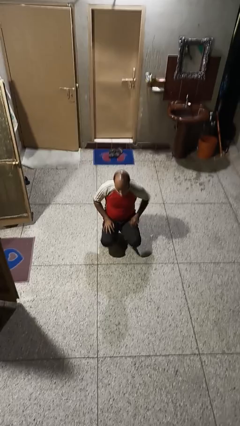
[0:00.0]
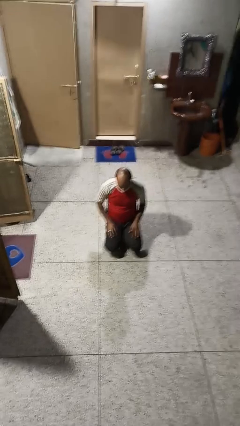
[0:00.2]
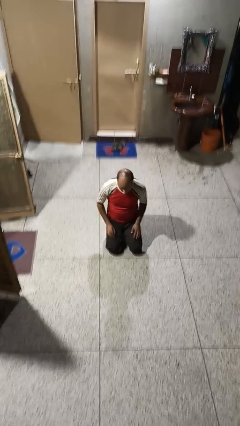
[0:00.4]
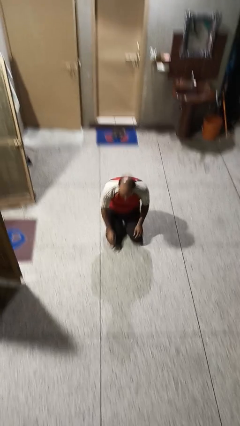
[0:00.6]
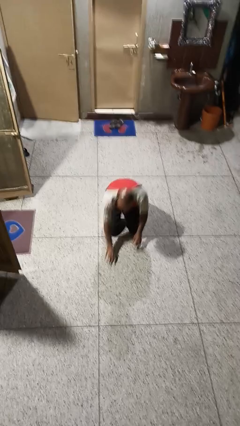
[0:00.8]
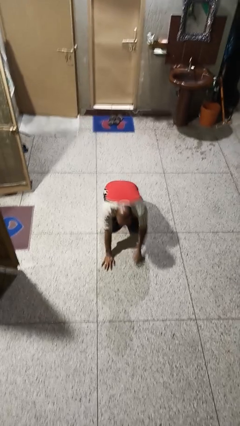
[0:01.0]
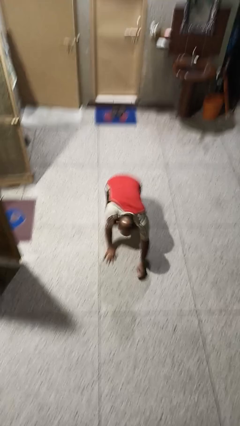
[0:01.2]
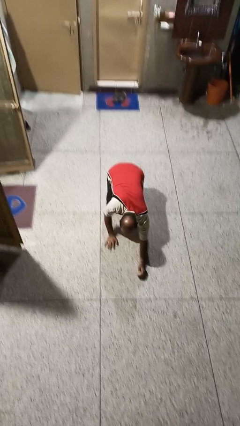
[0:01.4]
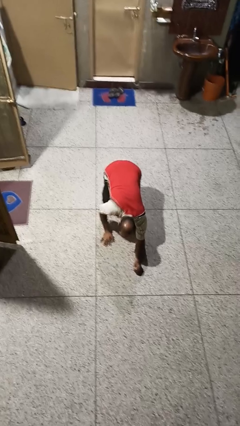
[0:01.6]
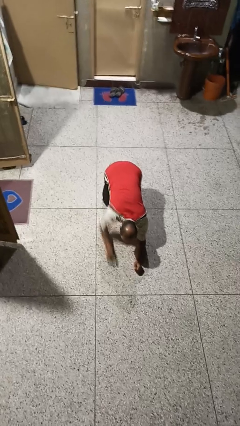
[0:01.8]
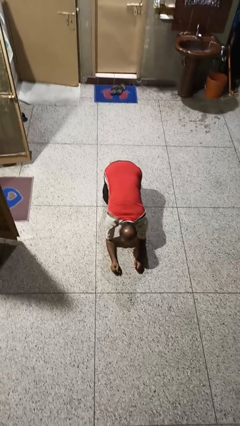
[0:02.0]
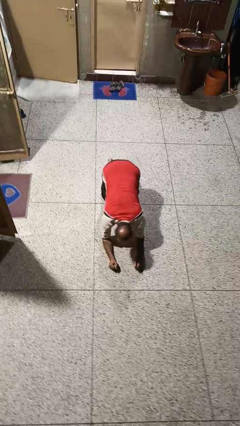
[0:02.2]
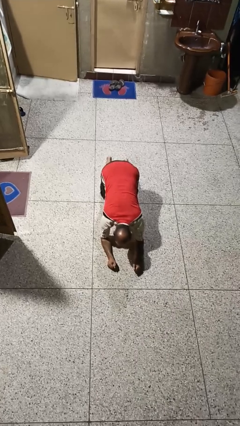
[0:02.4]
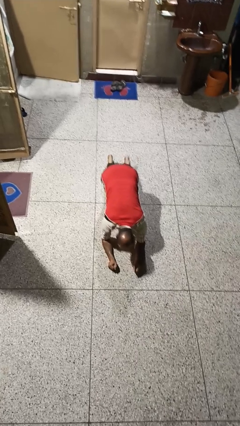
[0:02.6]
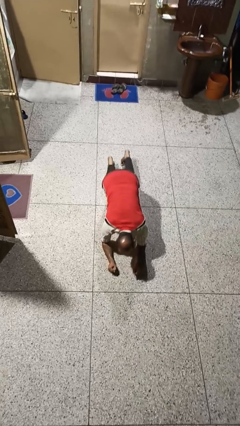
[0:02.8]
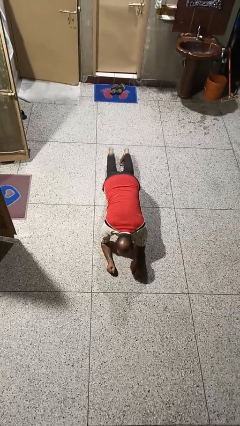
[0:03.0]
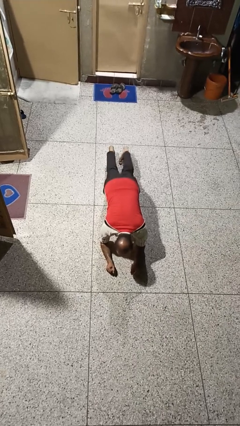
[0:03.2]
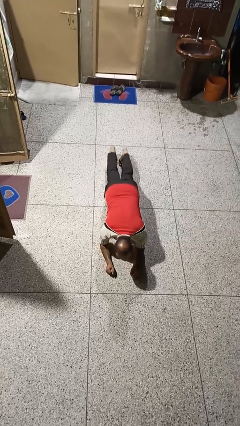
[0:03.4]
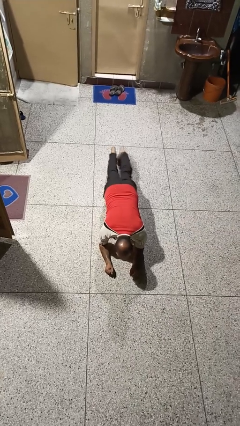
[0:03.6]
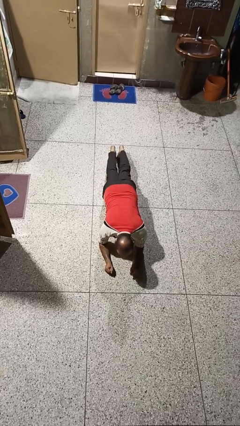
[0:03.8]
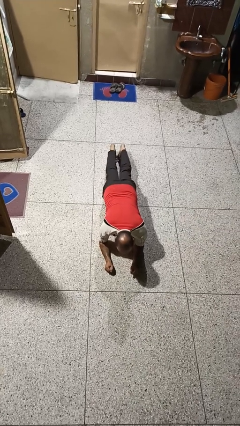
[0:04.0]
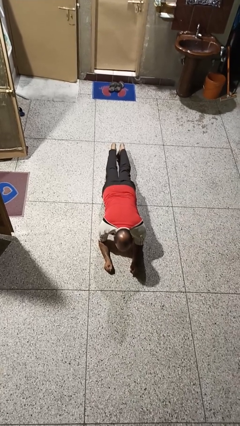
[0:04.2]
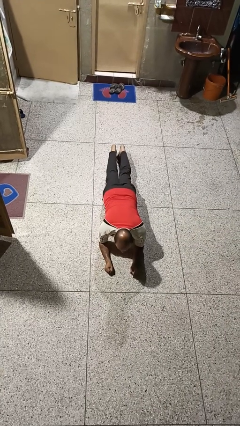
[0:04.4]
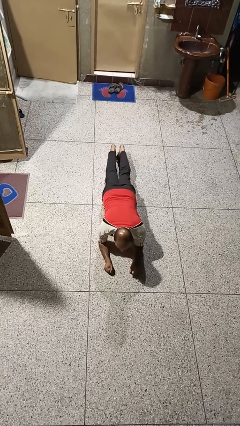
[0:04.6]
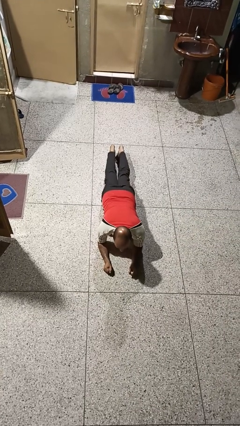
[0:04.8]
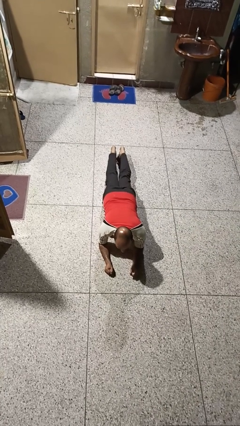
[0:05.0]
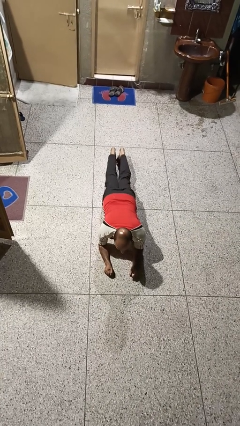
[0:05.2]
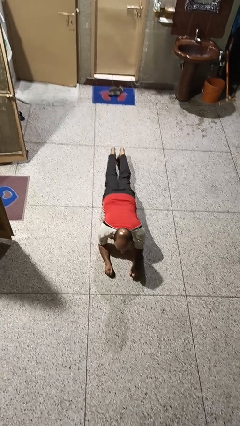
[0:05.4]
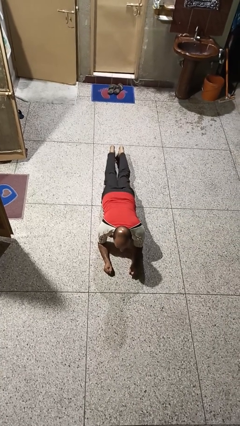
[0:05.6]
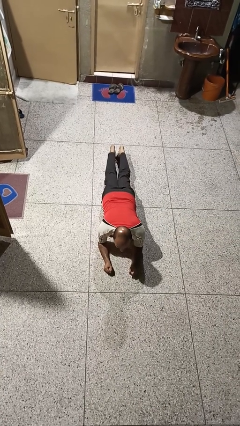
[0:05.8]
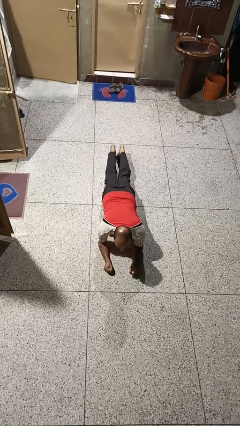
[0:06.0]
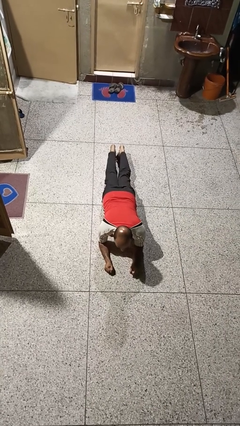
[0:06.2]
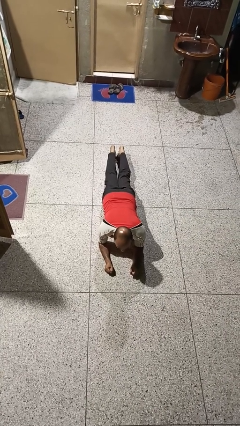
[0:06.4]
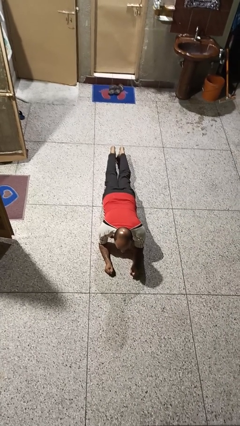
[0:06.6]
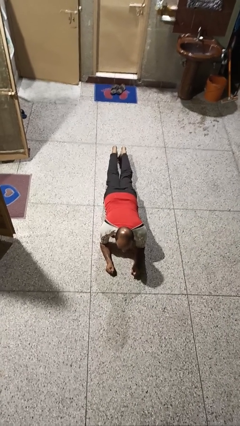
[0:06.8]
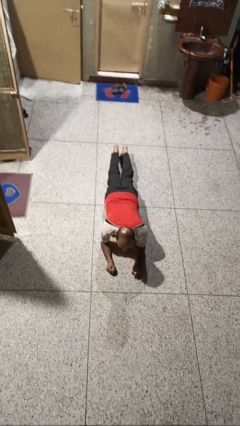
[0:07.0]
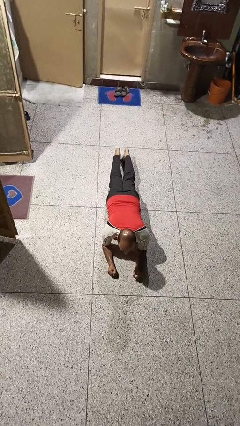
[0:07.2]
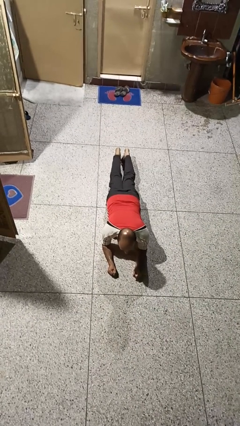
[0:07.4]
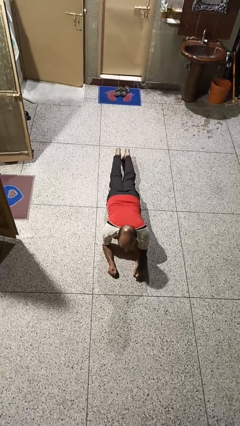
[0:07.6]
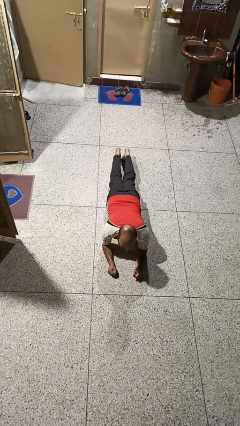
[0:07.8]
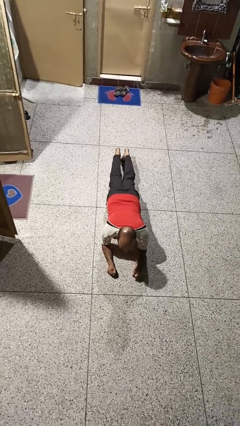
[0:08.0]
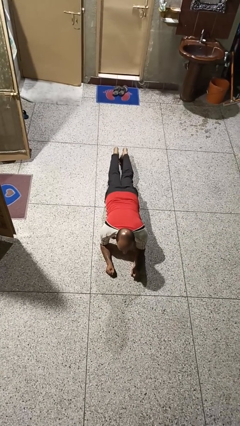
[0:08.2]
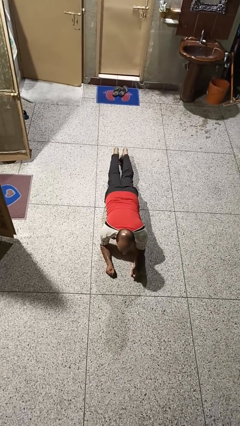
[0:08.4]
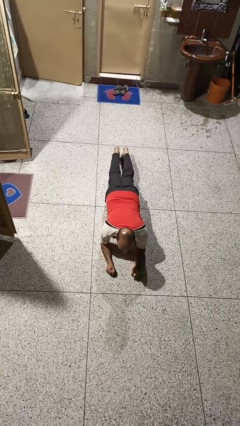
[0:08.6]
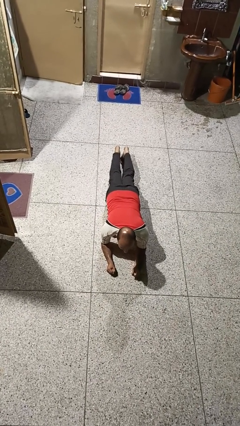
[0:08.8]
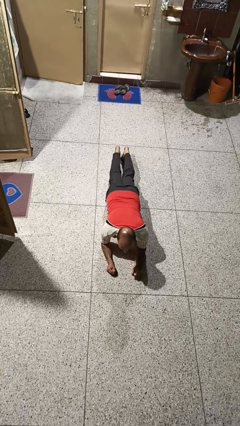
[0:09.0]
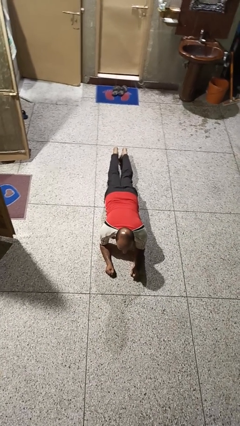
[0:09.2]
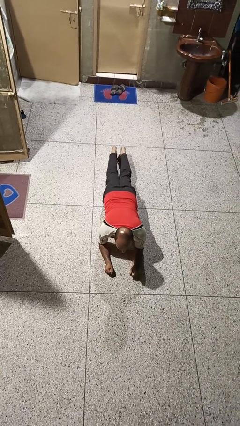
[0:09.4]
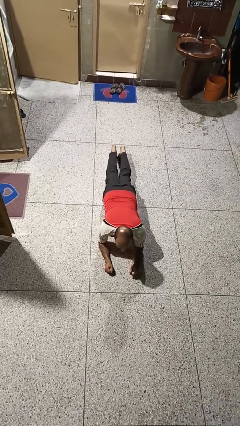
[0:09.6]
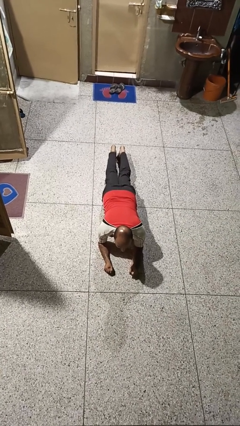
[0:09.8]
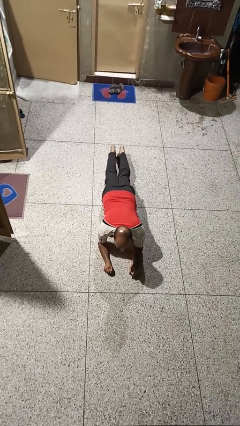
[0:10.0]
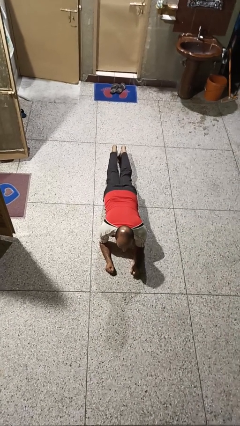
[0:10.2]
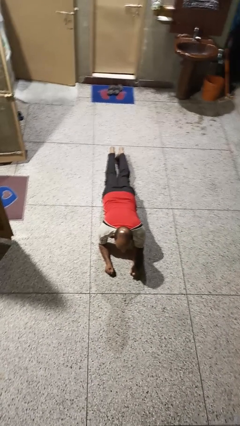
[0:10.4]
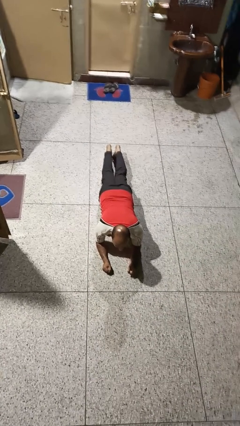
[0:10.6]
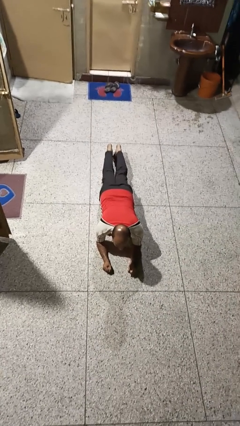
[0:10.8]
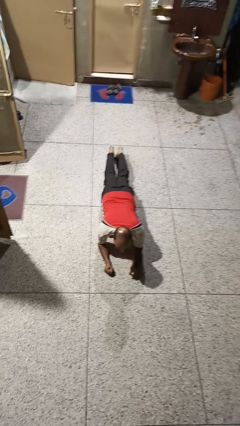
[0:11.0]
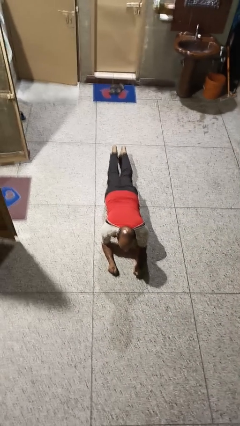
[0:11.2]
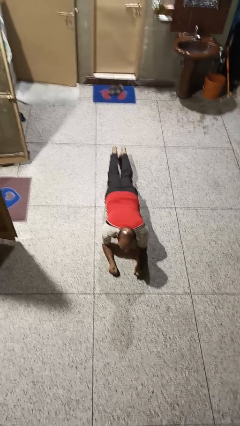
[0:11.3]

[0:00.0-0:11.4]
person exercises with plank

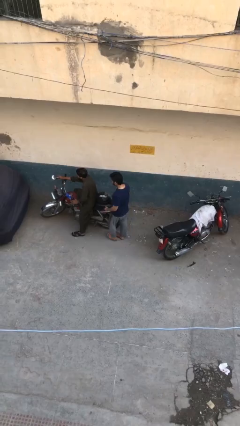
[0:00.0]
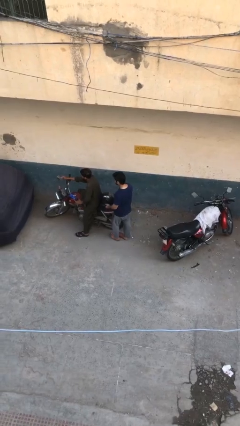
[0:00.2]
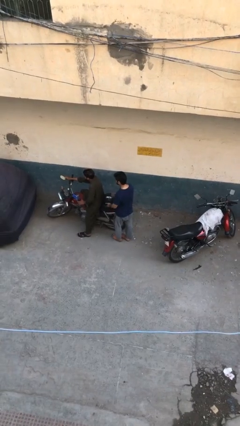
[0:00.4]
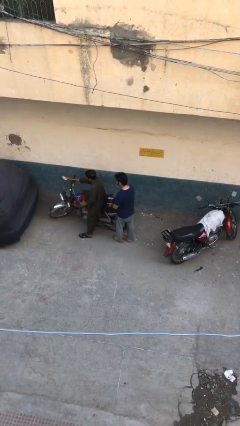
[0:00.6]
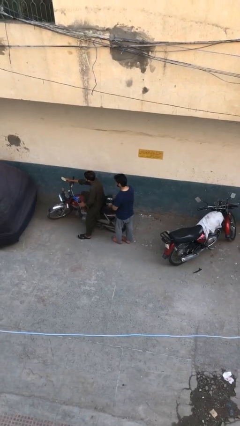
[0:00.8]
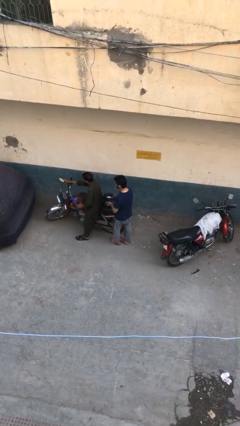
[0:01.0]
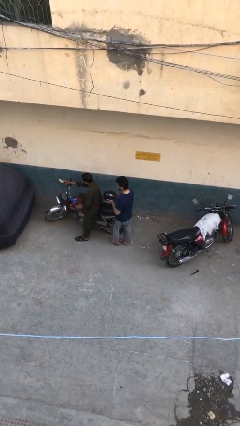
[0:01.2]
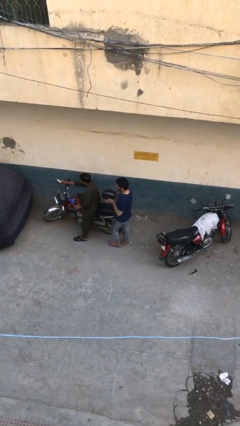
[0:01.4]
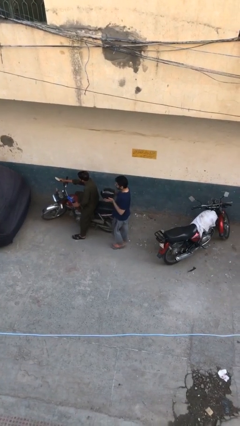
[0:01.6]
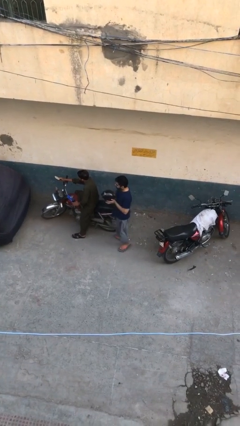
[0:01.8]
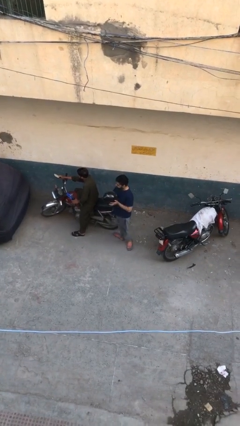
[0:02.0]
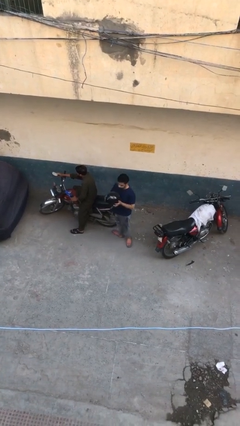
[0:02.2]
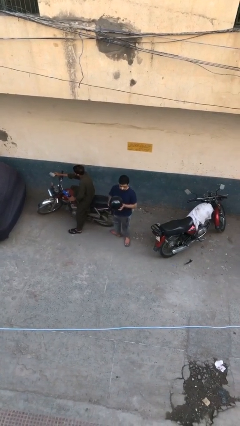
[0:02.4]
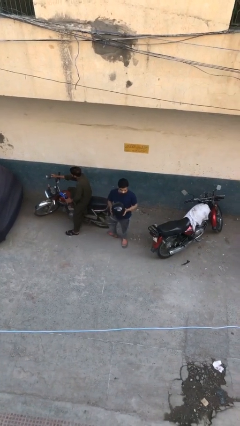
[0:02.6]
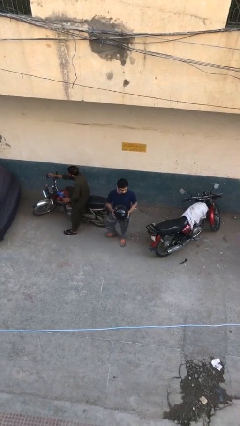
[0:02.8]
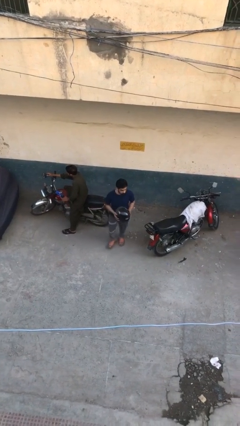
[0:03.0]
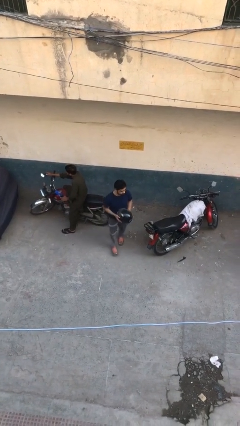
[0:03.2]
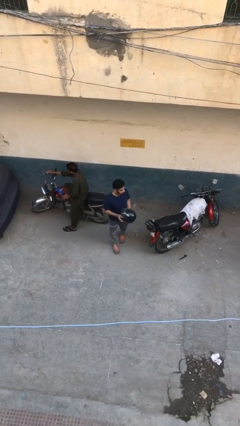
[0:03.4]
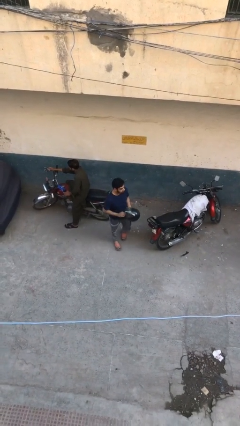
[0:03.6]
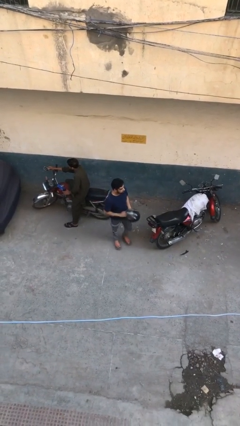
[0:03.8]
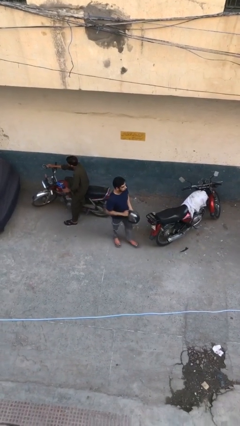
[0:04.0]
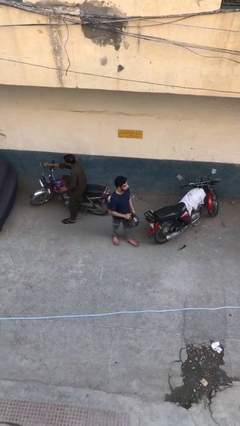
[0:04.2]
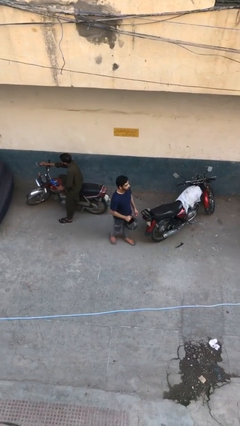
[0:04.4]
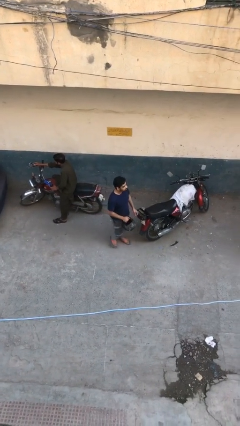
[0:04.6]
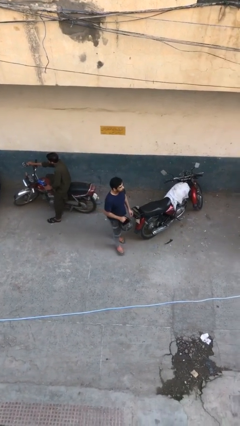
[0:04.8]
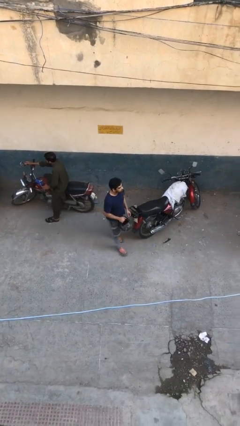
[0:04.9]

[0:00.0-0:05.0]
person steals object from person

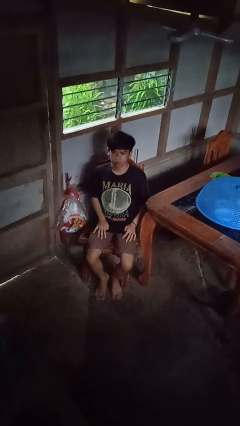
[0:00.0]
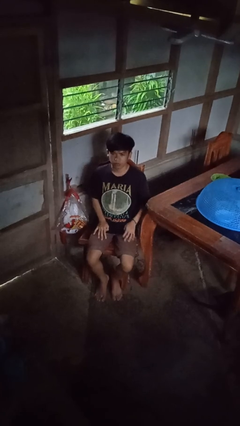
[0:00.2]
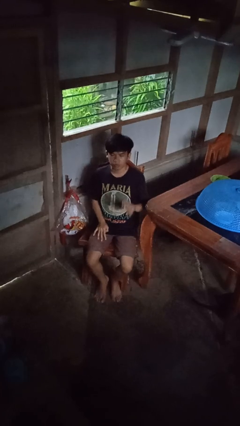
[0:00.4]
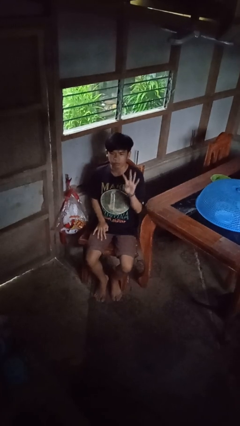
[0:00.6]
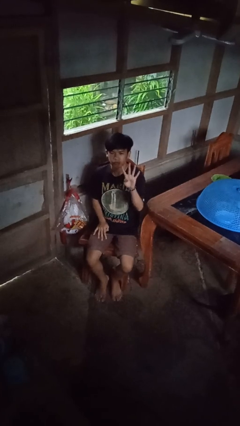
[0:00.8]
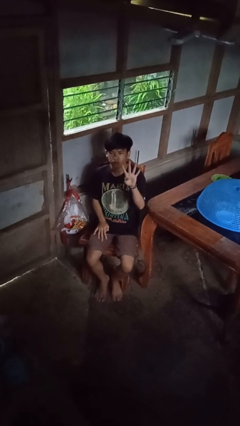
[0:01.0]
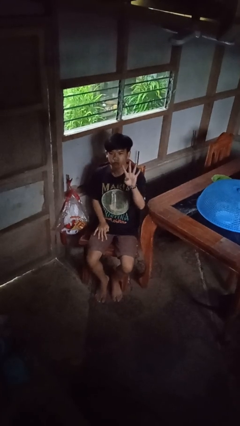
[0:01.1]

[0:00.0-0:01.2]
person gestures number four
